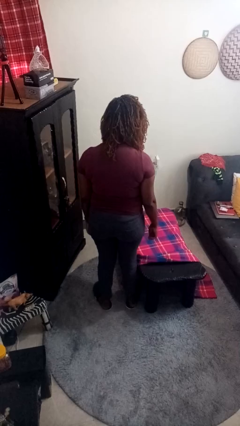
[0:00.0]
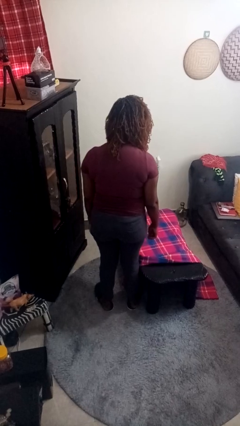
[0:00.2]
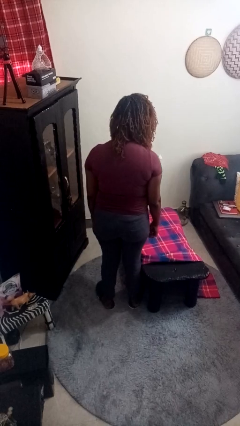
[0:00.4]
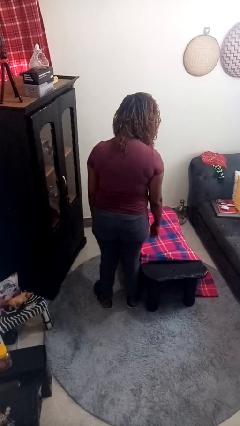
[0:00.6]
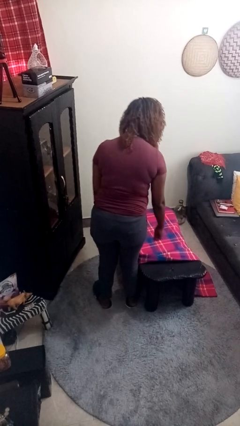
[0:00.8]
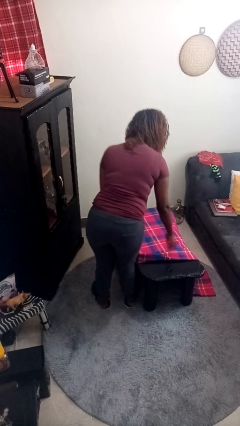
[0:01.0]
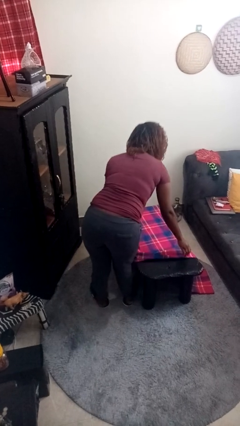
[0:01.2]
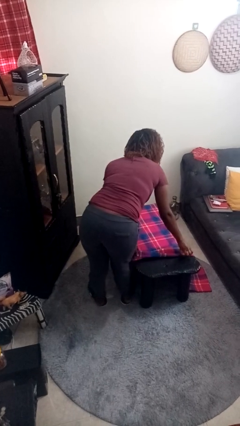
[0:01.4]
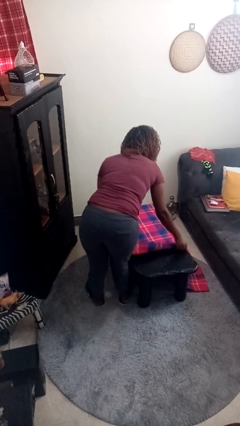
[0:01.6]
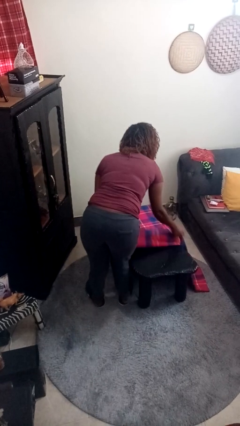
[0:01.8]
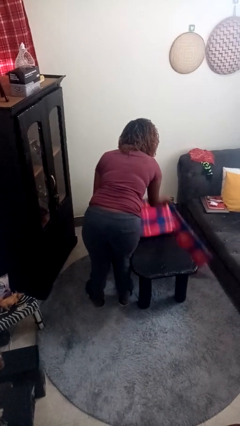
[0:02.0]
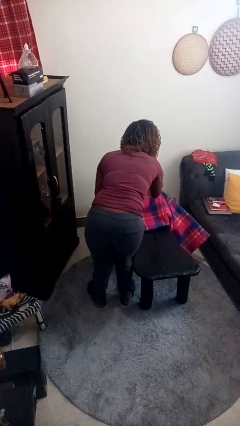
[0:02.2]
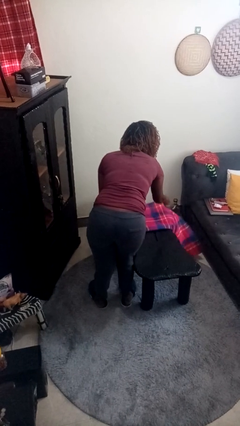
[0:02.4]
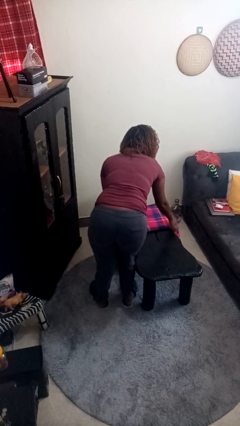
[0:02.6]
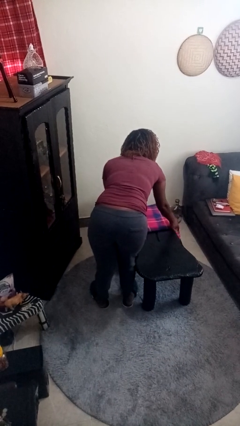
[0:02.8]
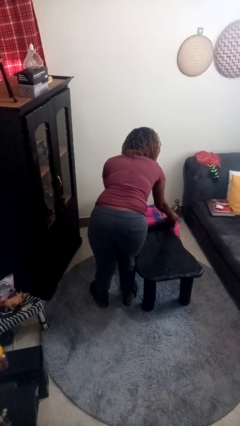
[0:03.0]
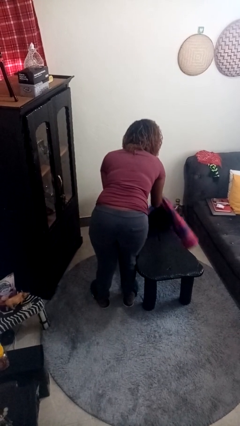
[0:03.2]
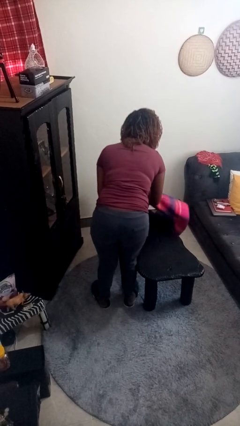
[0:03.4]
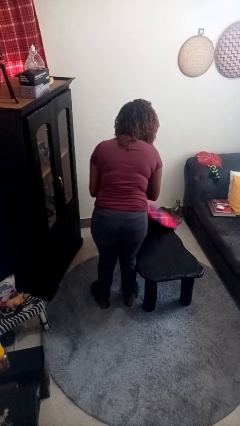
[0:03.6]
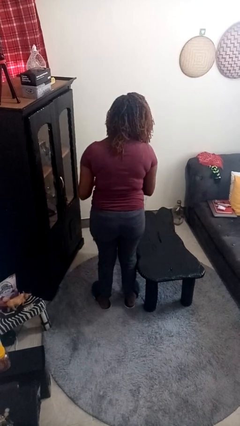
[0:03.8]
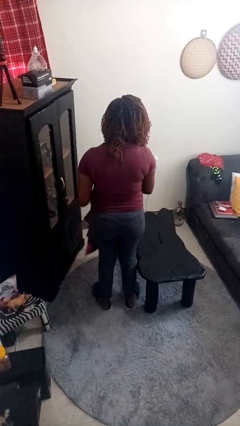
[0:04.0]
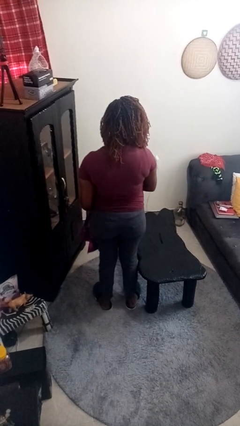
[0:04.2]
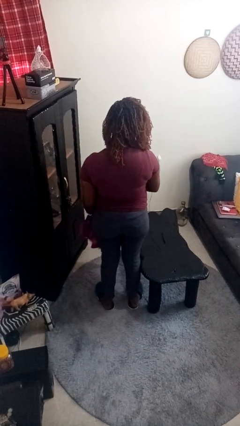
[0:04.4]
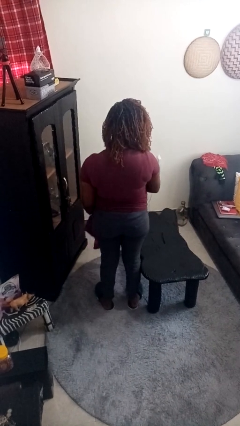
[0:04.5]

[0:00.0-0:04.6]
person folds tablecloth

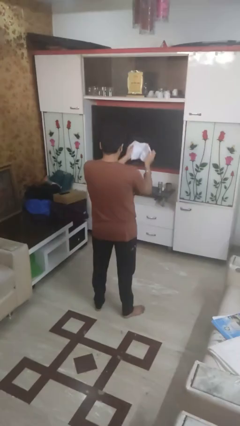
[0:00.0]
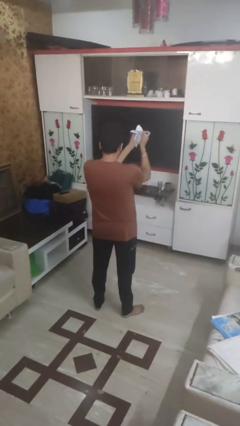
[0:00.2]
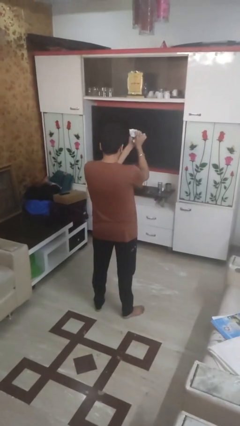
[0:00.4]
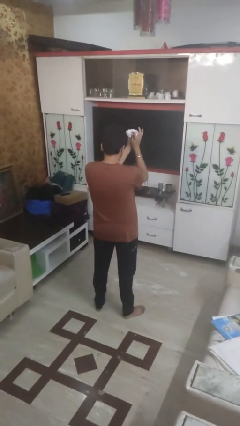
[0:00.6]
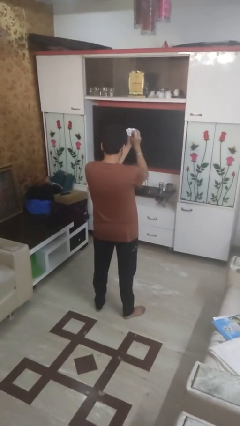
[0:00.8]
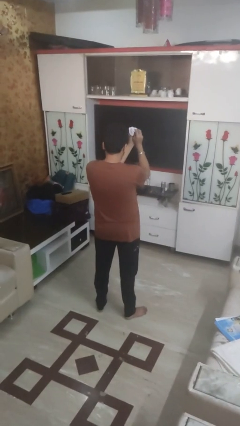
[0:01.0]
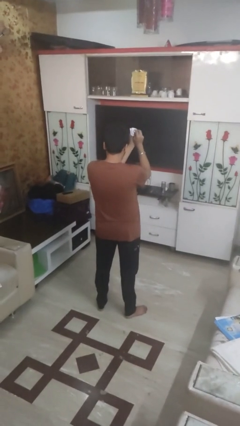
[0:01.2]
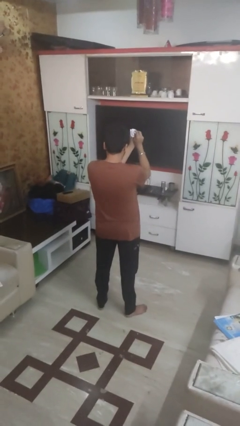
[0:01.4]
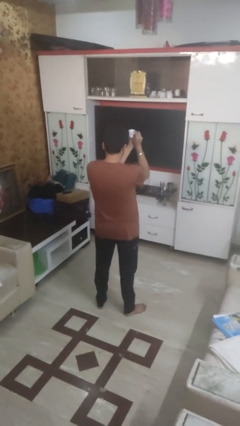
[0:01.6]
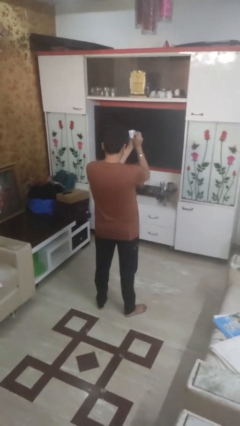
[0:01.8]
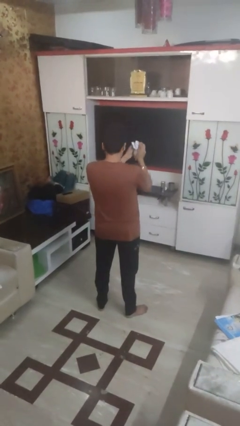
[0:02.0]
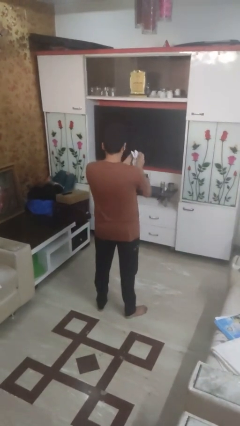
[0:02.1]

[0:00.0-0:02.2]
person crumples paper

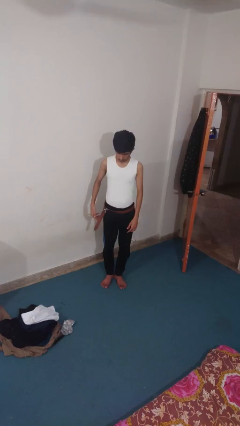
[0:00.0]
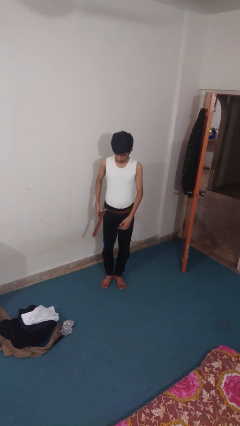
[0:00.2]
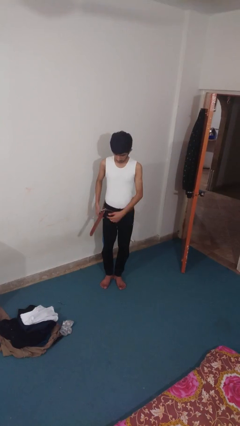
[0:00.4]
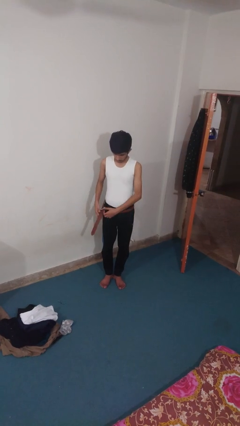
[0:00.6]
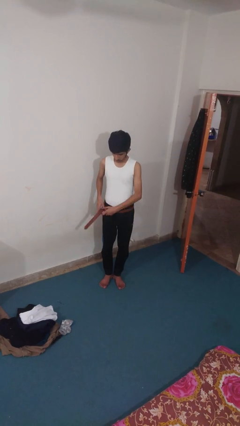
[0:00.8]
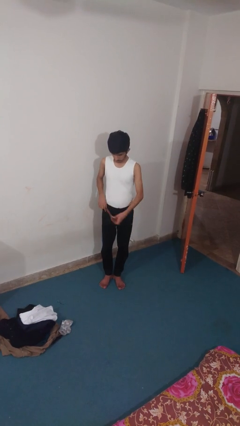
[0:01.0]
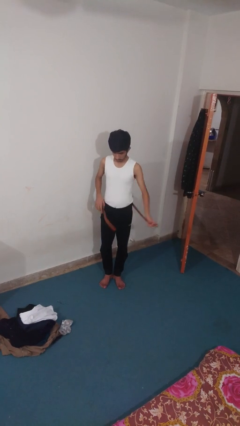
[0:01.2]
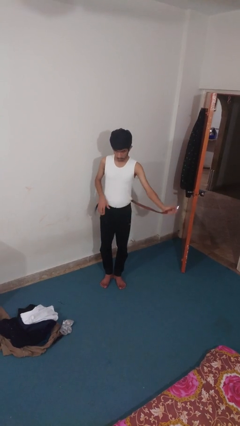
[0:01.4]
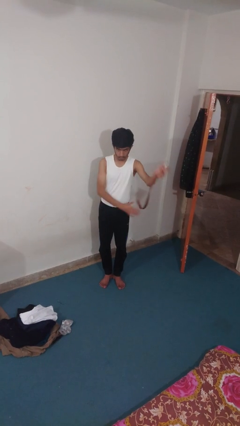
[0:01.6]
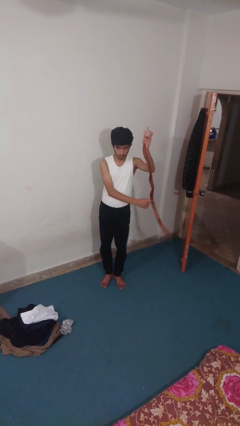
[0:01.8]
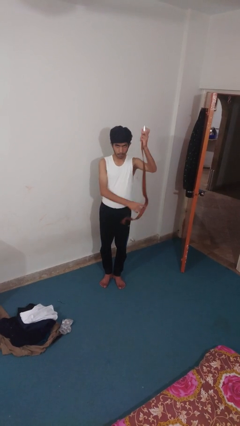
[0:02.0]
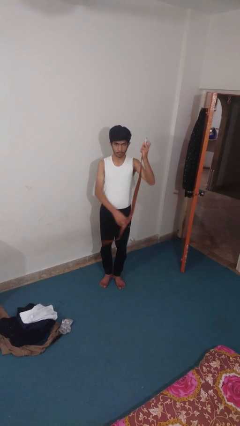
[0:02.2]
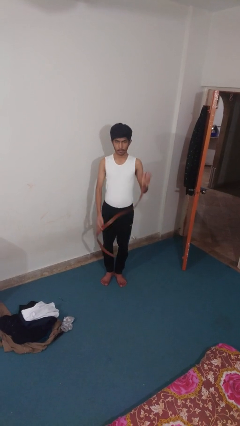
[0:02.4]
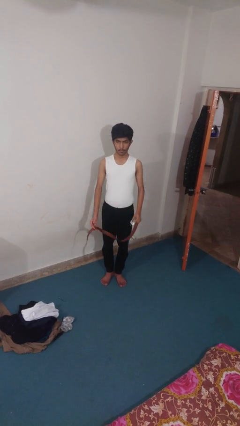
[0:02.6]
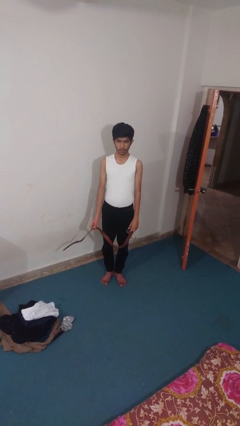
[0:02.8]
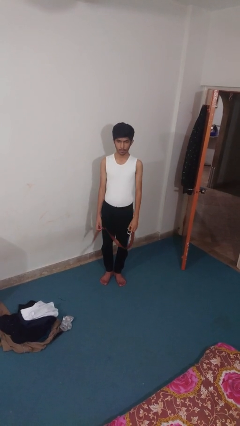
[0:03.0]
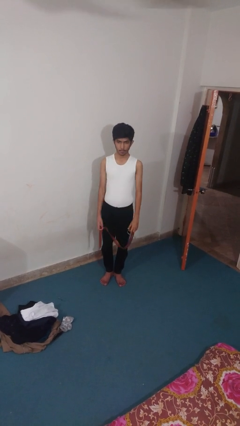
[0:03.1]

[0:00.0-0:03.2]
person takes off belt

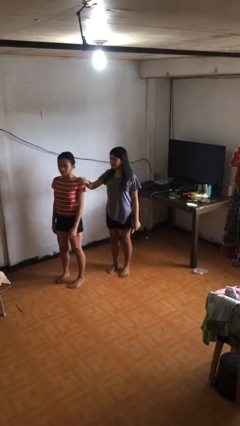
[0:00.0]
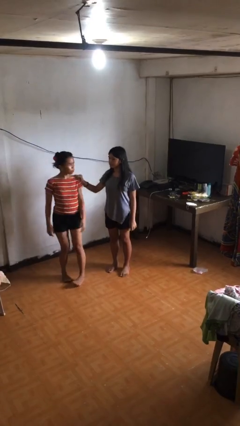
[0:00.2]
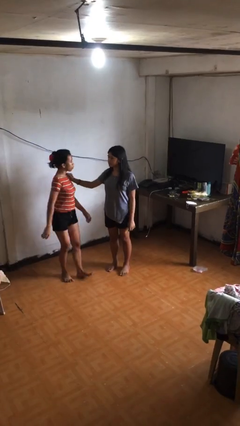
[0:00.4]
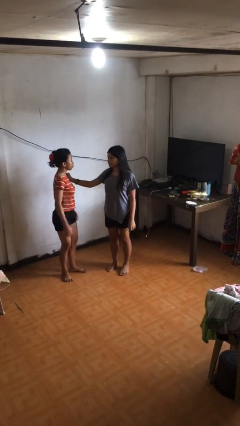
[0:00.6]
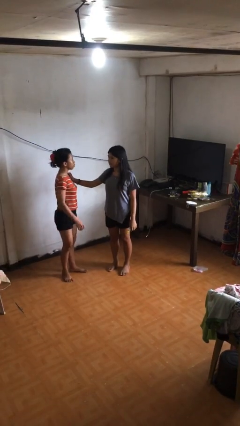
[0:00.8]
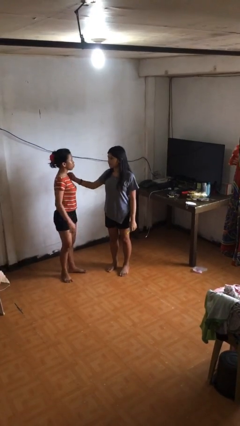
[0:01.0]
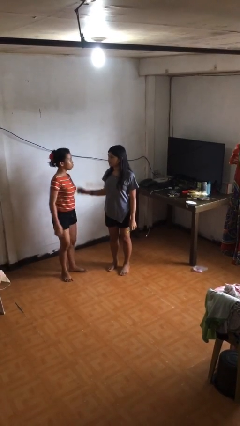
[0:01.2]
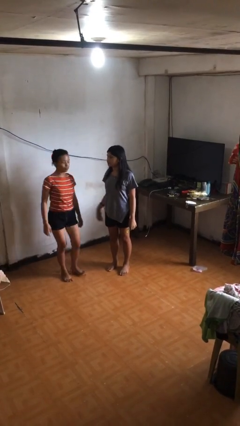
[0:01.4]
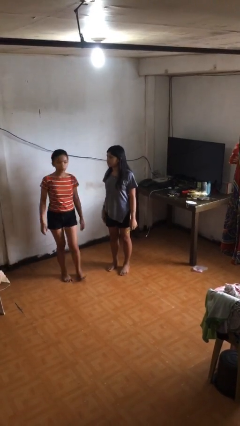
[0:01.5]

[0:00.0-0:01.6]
person spins person around

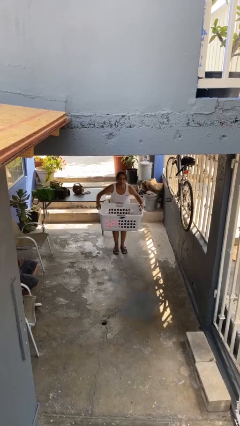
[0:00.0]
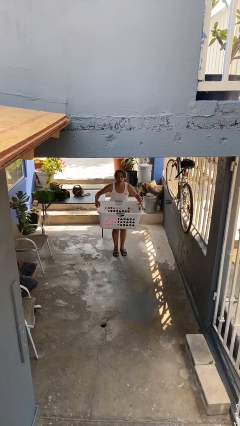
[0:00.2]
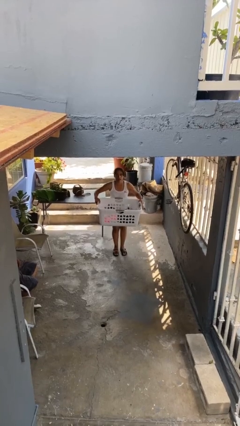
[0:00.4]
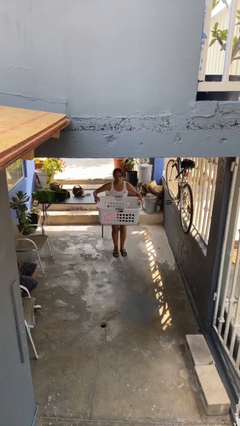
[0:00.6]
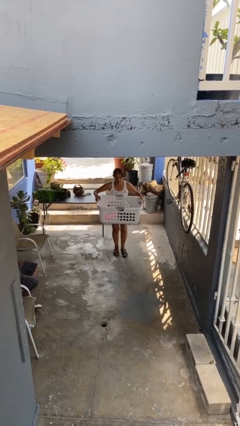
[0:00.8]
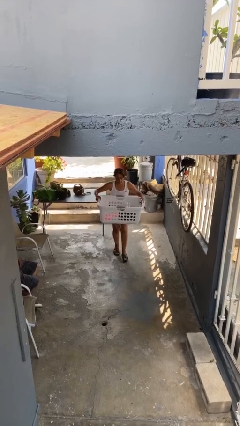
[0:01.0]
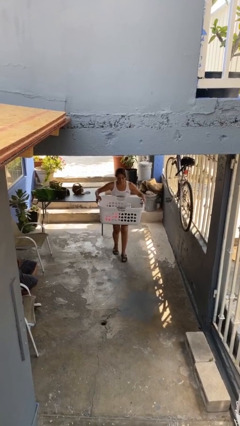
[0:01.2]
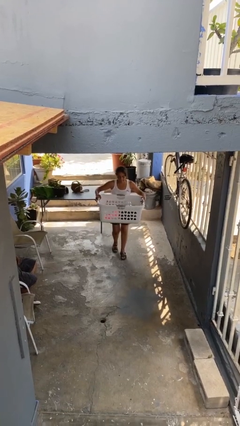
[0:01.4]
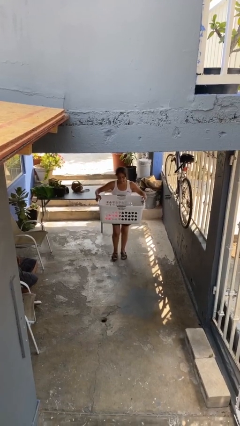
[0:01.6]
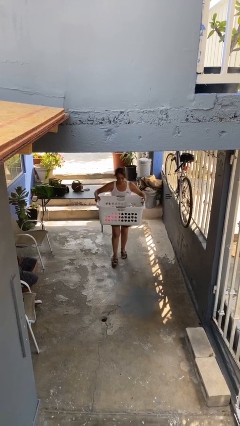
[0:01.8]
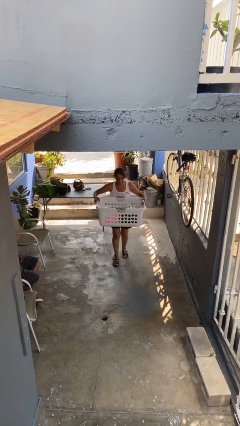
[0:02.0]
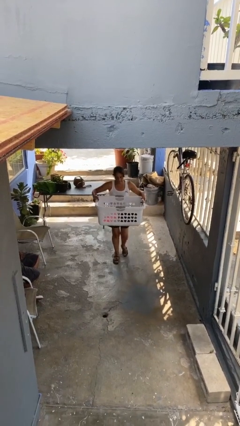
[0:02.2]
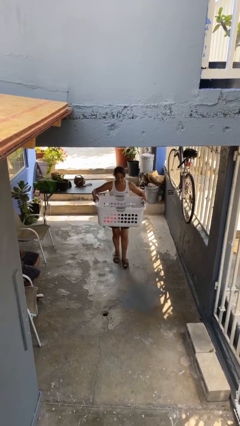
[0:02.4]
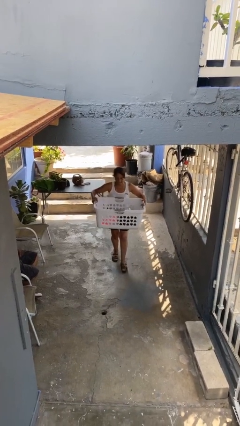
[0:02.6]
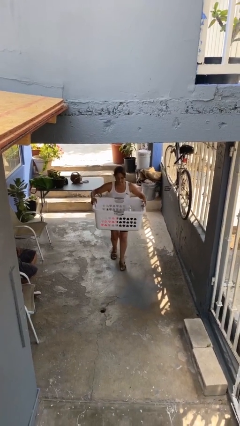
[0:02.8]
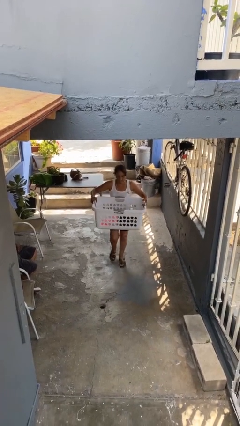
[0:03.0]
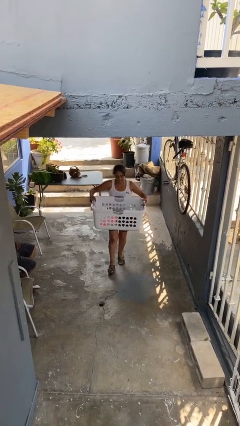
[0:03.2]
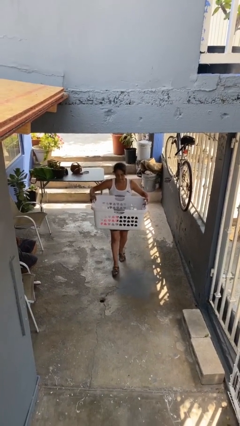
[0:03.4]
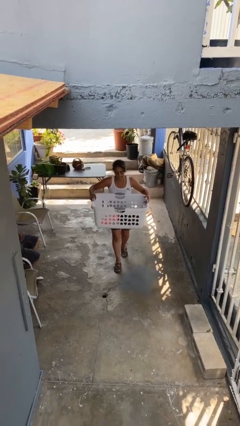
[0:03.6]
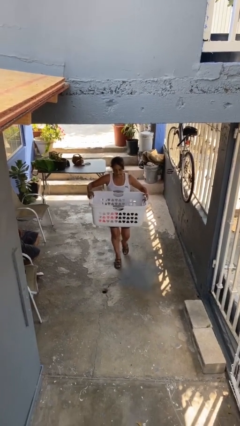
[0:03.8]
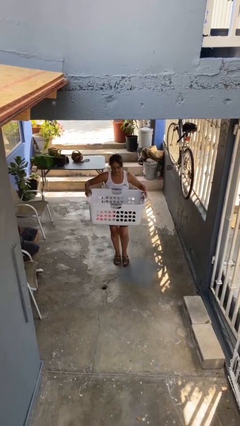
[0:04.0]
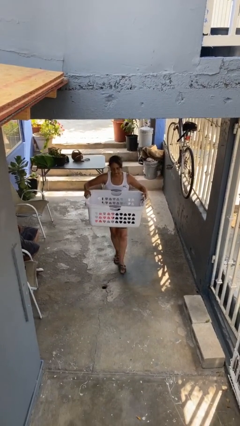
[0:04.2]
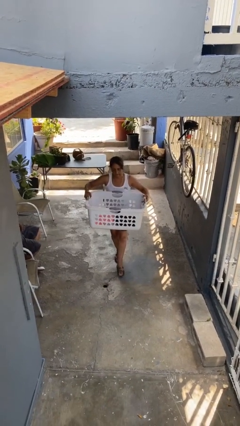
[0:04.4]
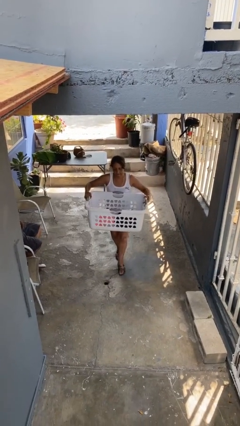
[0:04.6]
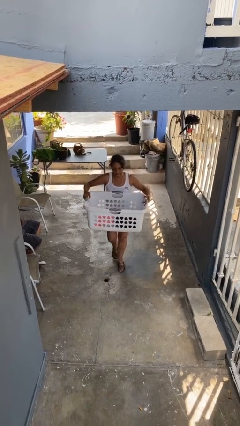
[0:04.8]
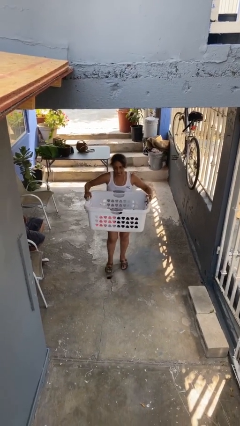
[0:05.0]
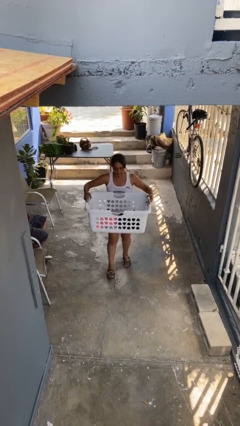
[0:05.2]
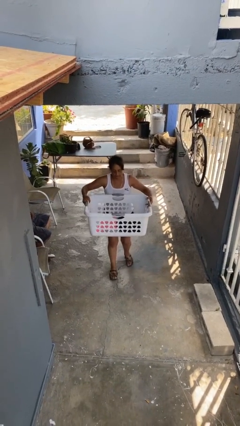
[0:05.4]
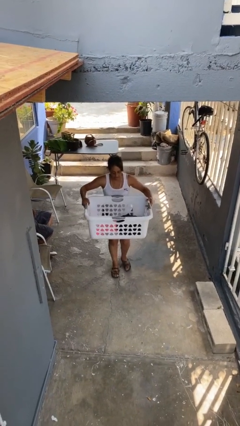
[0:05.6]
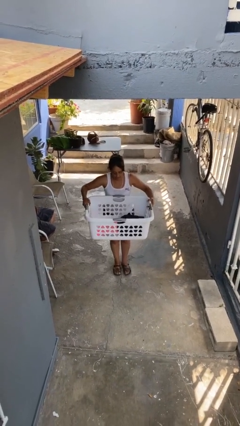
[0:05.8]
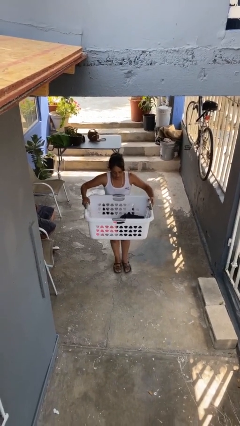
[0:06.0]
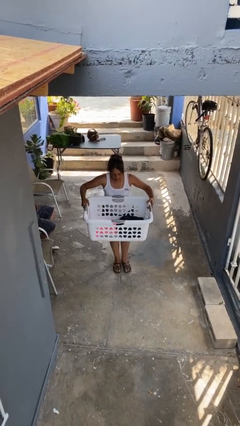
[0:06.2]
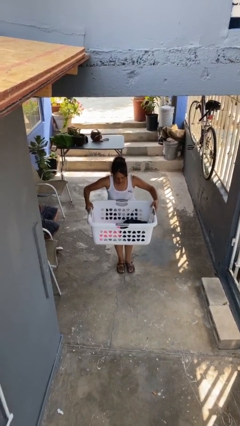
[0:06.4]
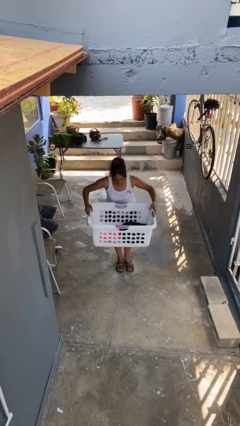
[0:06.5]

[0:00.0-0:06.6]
person carries heavy object
